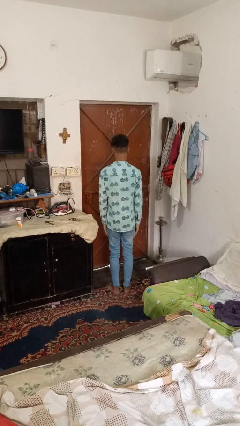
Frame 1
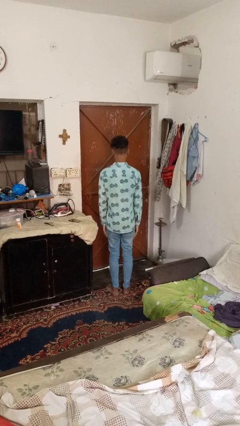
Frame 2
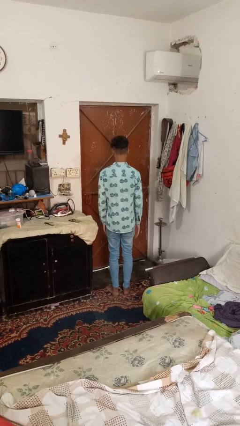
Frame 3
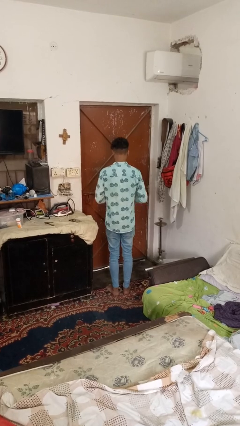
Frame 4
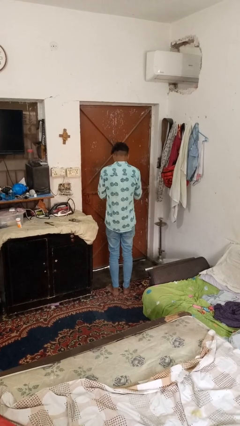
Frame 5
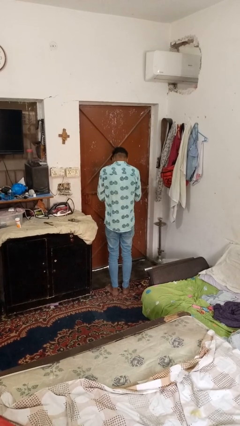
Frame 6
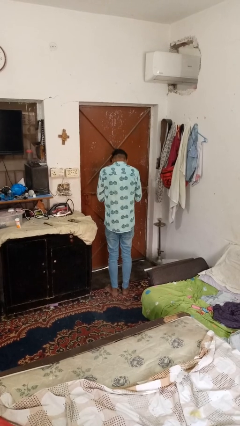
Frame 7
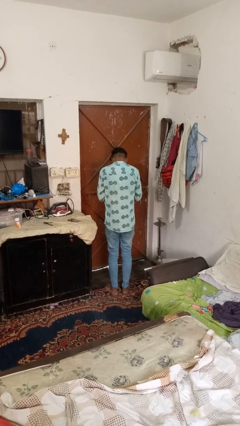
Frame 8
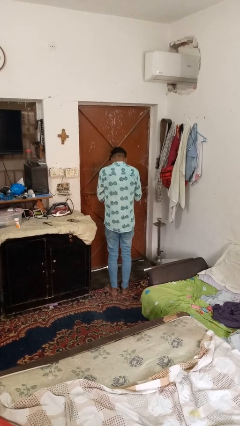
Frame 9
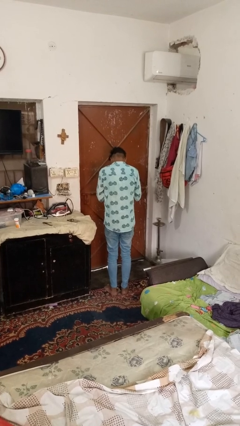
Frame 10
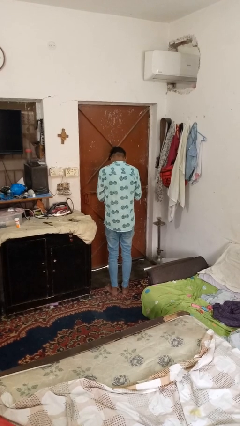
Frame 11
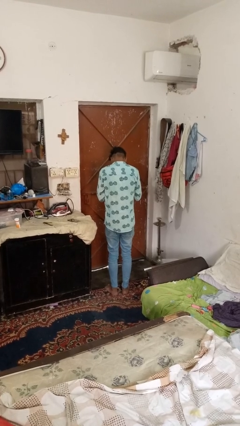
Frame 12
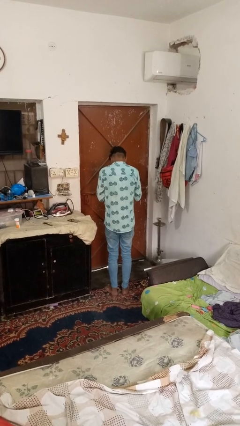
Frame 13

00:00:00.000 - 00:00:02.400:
person sneezes into hand

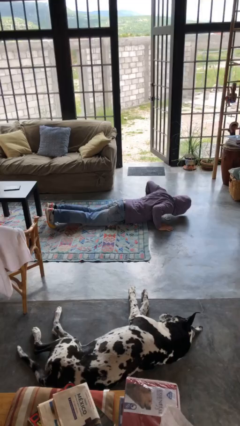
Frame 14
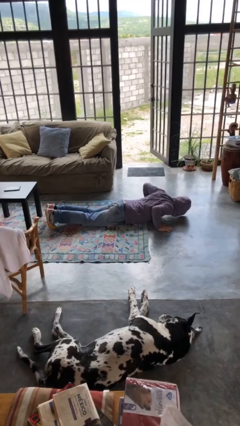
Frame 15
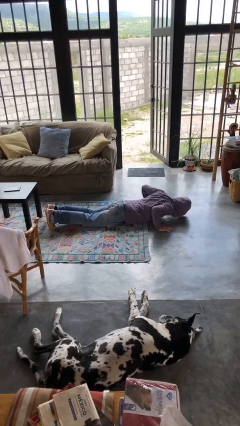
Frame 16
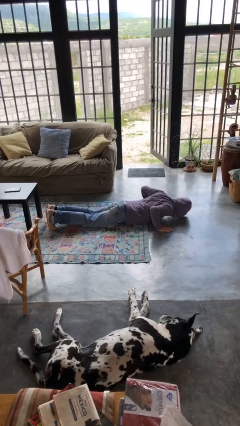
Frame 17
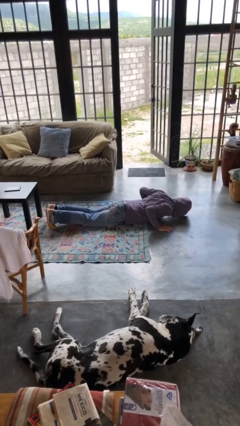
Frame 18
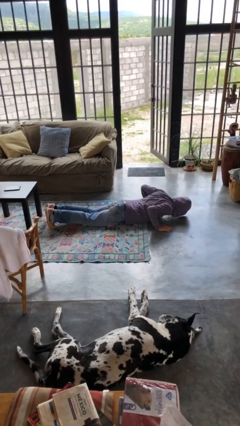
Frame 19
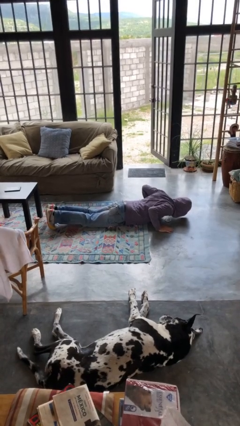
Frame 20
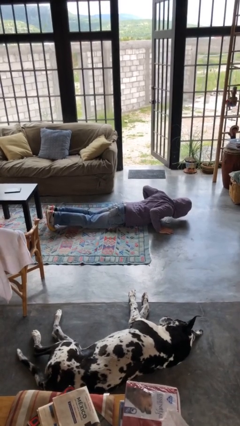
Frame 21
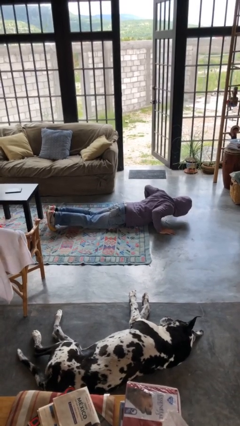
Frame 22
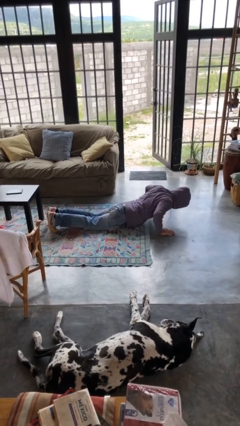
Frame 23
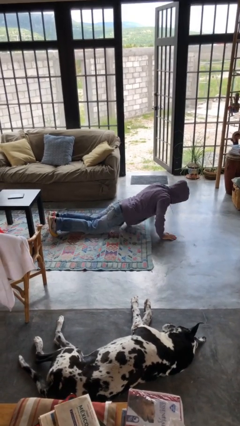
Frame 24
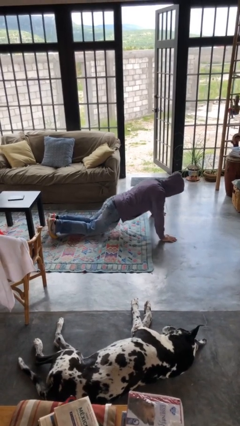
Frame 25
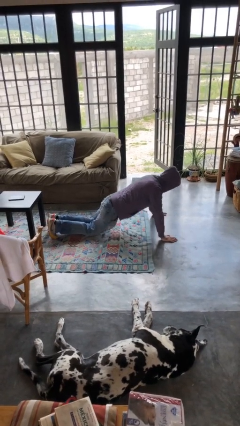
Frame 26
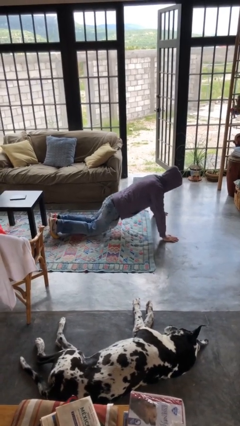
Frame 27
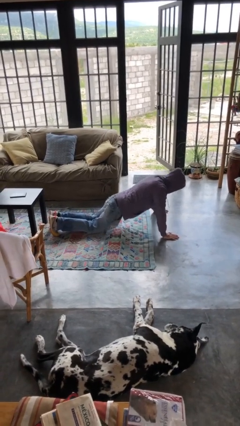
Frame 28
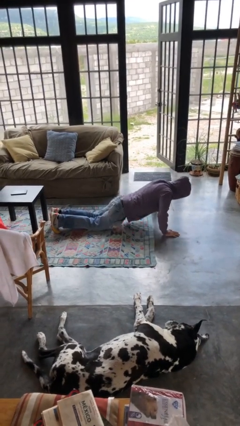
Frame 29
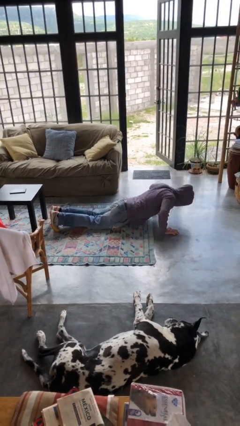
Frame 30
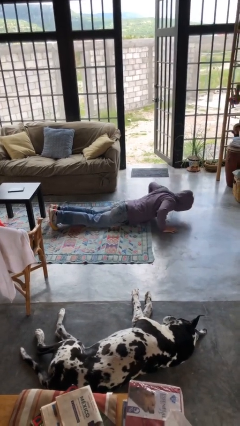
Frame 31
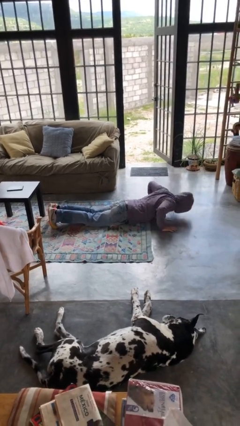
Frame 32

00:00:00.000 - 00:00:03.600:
person exercises with pushup

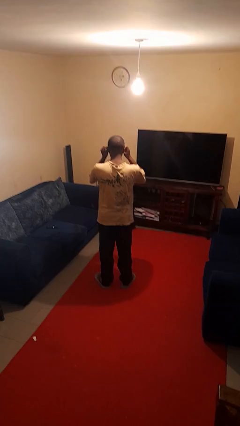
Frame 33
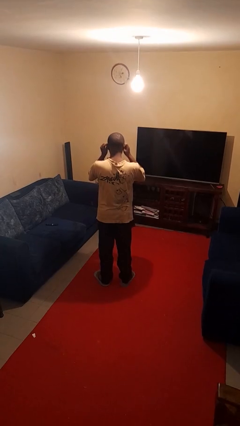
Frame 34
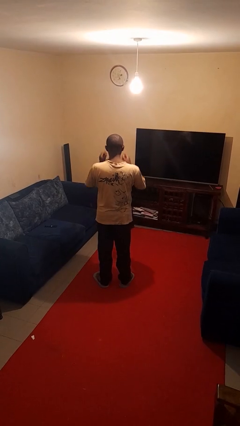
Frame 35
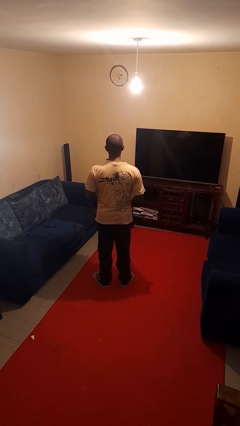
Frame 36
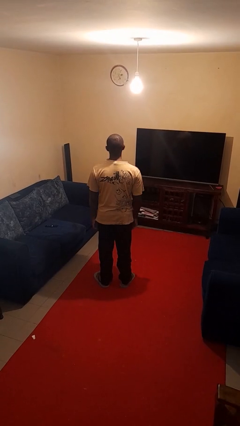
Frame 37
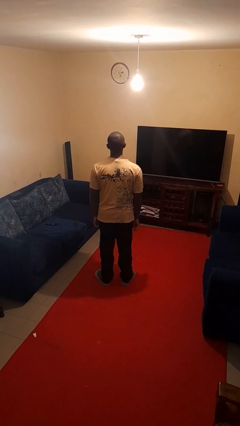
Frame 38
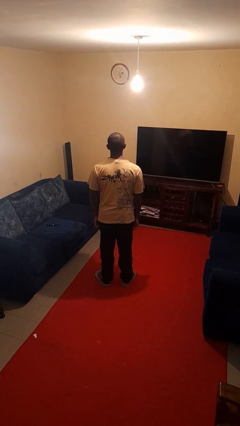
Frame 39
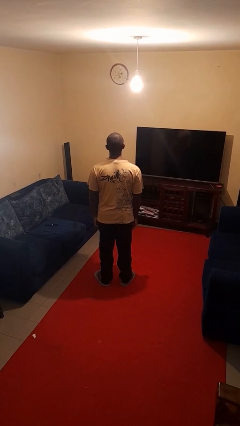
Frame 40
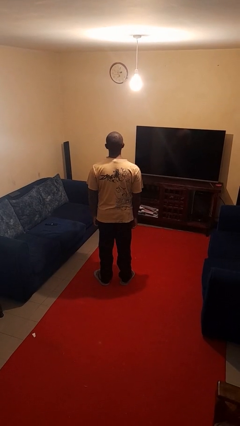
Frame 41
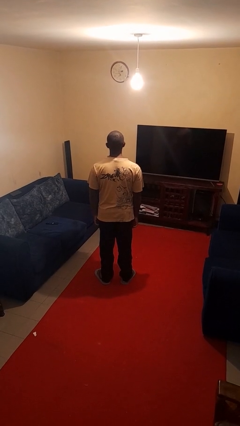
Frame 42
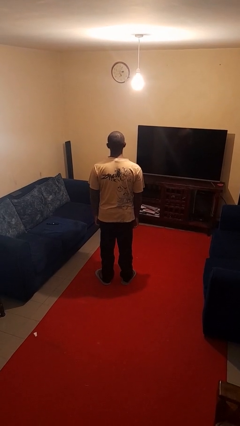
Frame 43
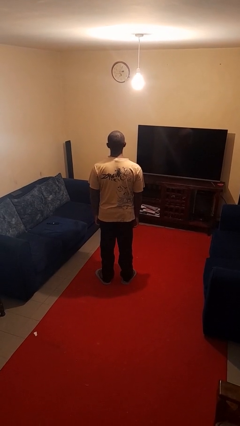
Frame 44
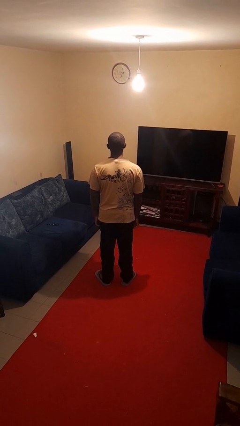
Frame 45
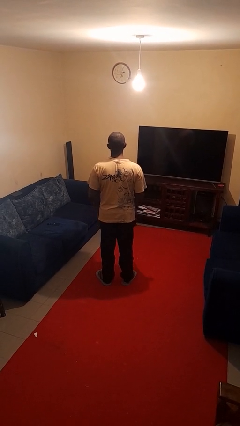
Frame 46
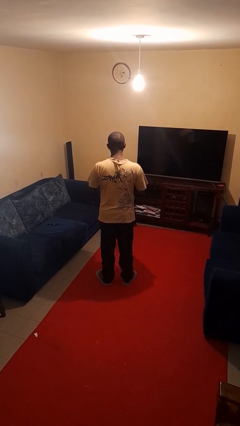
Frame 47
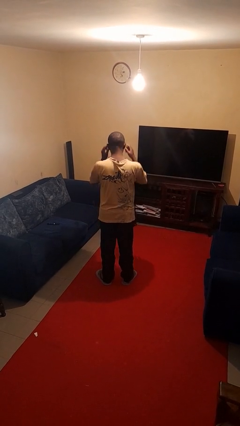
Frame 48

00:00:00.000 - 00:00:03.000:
person puts on sunglasses

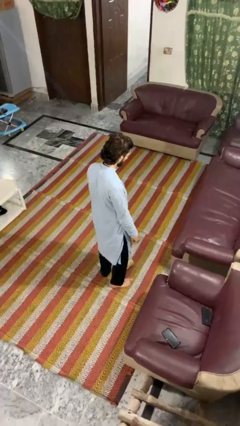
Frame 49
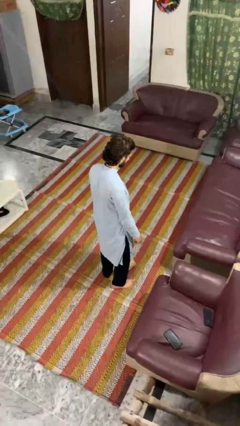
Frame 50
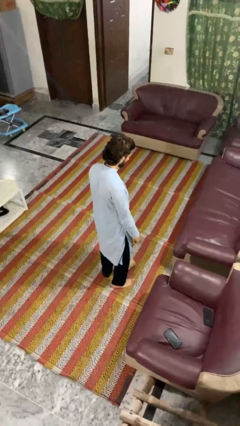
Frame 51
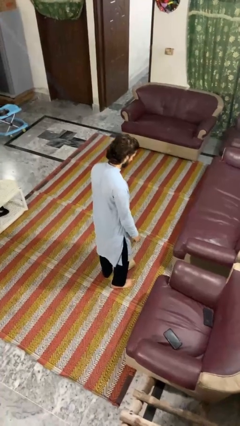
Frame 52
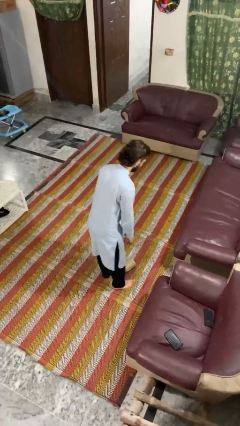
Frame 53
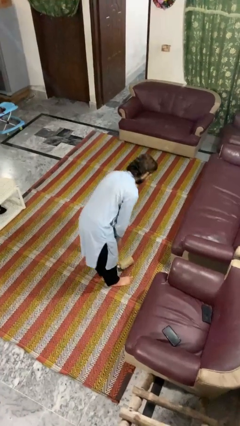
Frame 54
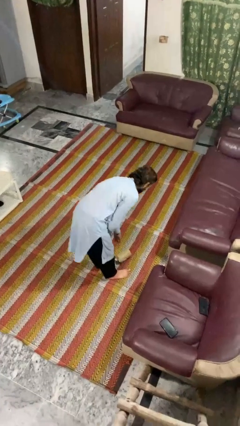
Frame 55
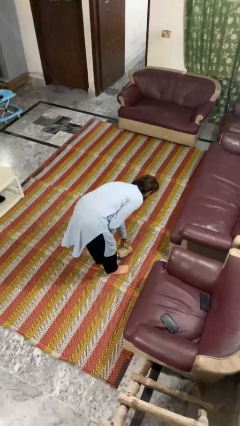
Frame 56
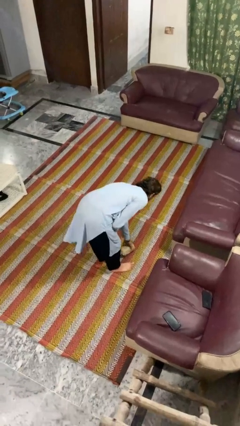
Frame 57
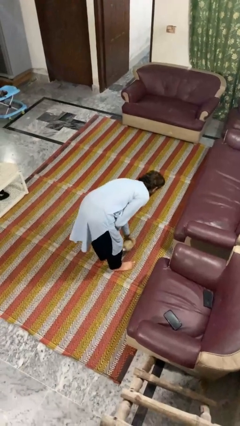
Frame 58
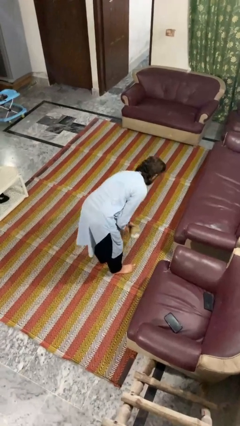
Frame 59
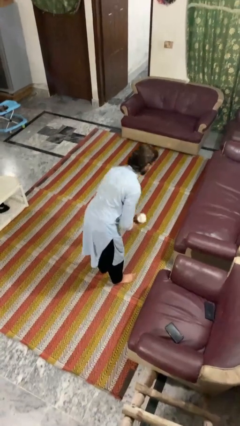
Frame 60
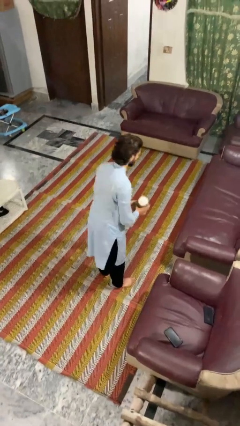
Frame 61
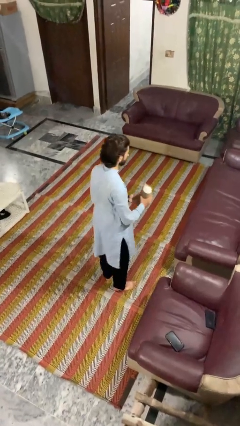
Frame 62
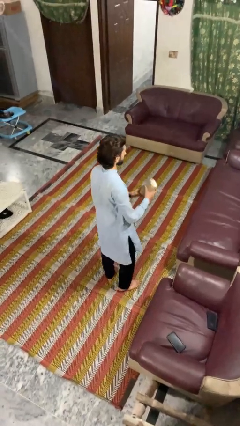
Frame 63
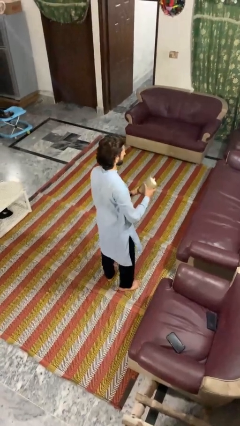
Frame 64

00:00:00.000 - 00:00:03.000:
person picks up object from floor

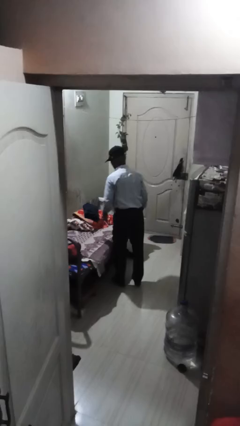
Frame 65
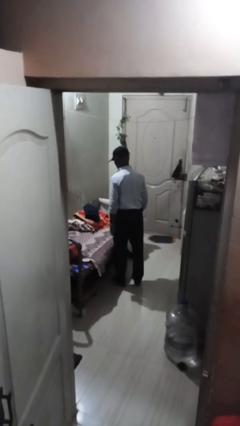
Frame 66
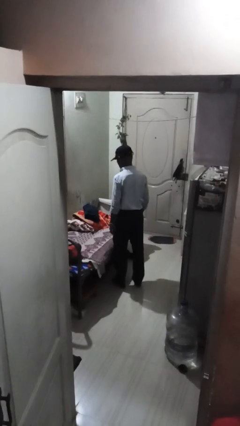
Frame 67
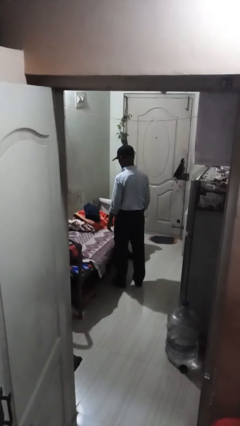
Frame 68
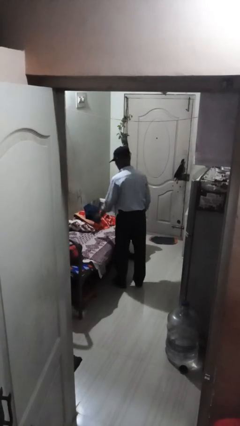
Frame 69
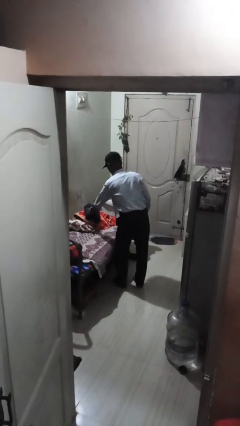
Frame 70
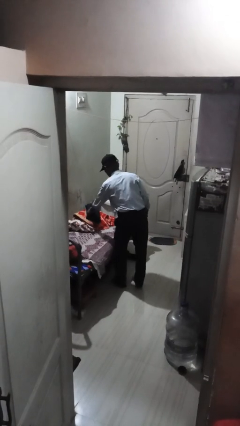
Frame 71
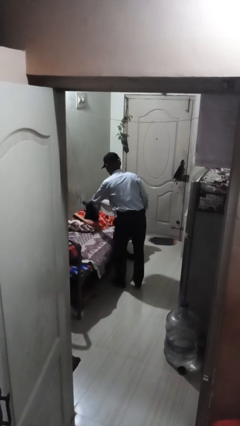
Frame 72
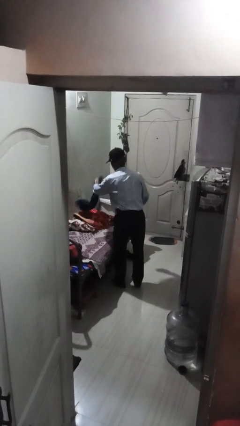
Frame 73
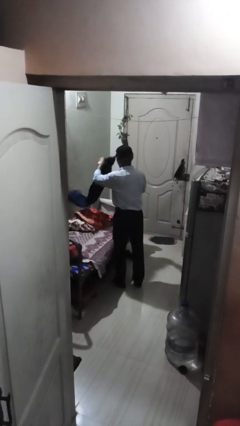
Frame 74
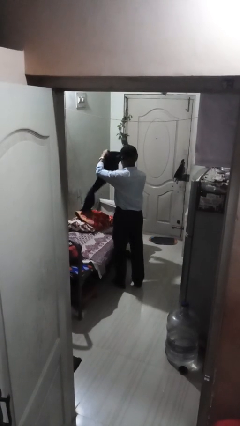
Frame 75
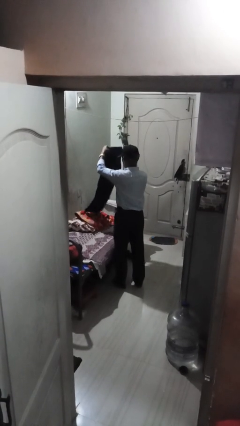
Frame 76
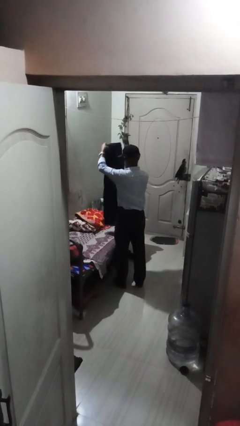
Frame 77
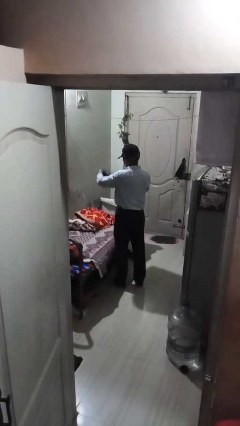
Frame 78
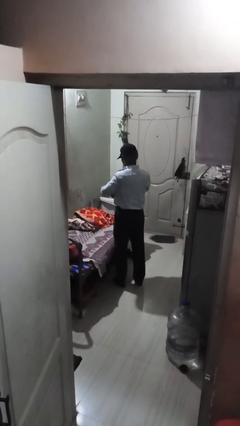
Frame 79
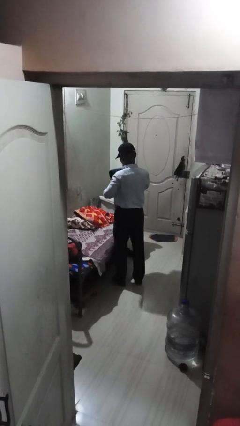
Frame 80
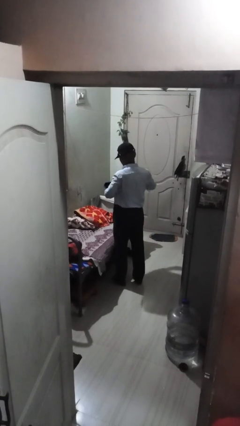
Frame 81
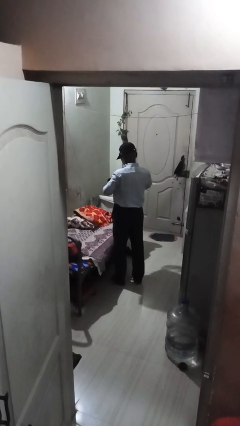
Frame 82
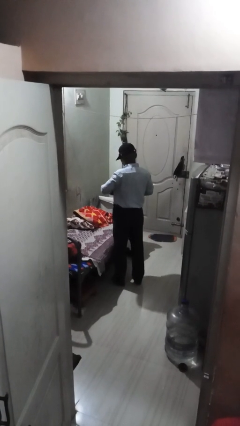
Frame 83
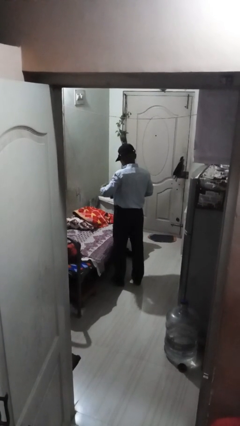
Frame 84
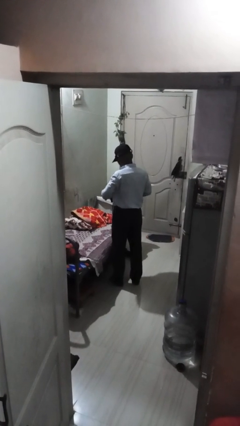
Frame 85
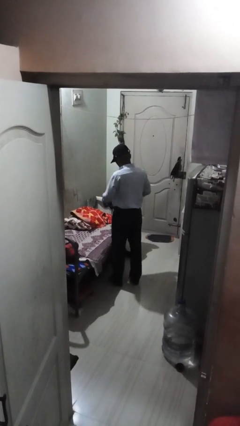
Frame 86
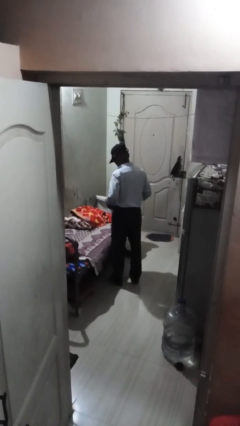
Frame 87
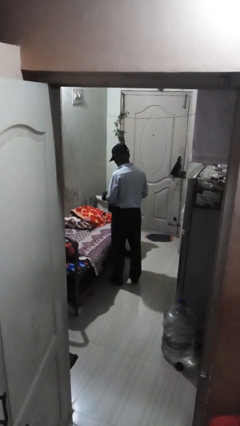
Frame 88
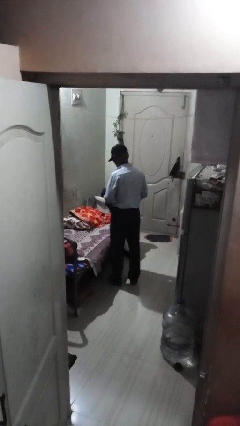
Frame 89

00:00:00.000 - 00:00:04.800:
person folds pants

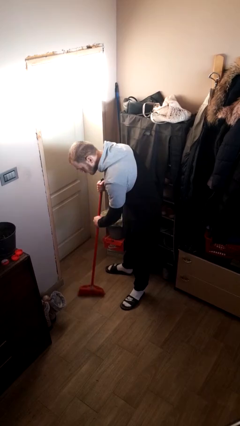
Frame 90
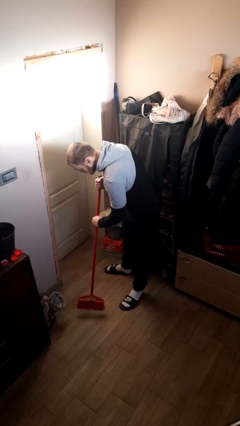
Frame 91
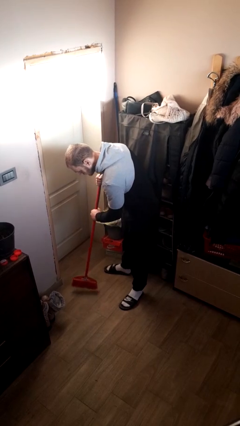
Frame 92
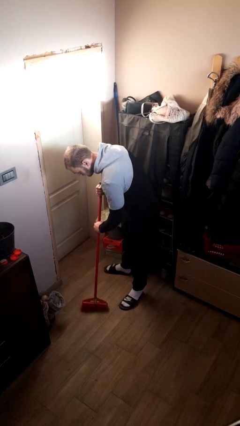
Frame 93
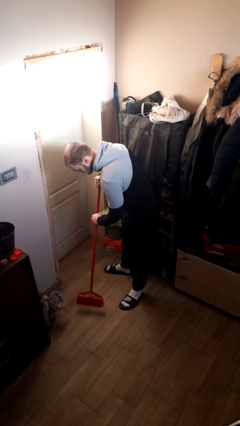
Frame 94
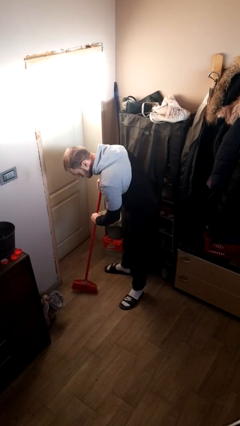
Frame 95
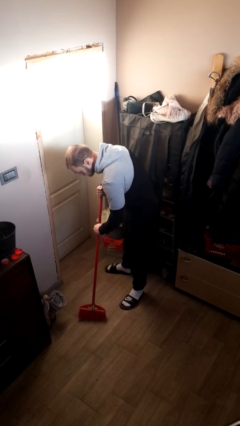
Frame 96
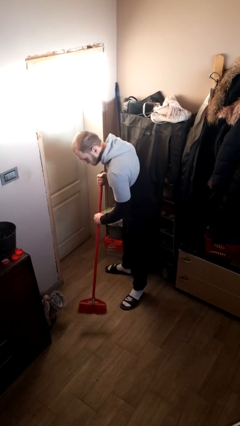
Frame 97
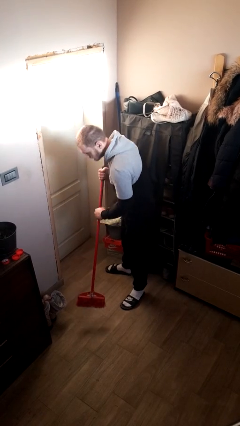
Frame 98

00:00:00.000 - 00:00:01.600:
person sweeps floor
